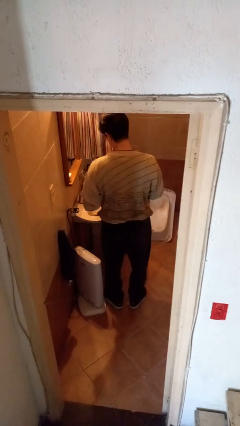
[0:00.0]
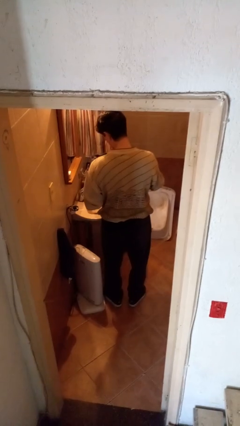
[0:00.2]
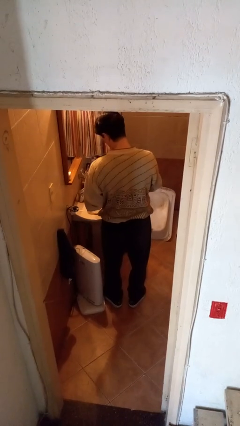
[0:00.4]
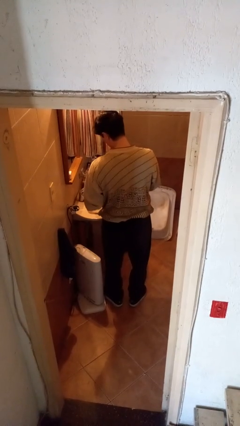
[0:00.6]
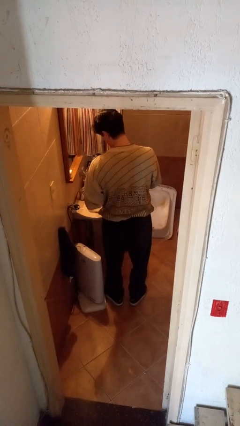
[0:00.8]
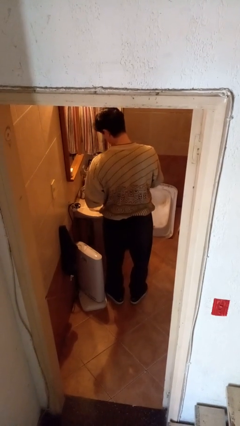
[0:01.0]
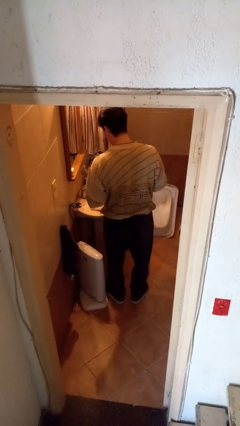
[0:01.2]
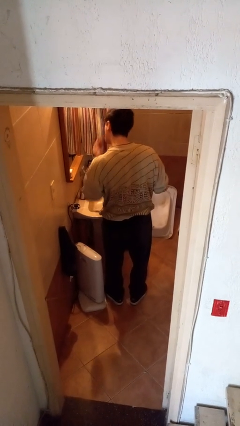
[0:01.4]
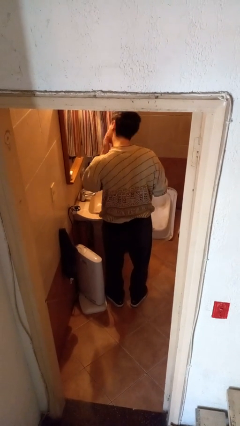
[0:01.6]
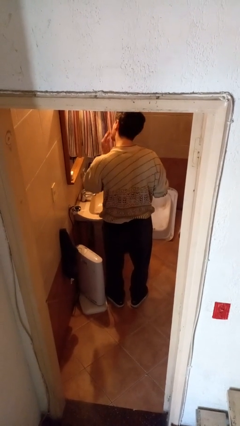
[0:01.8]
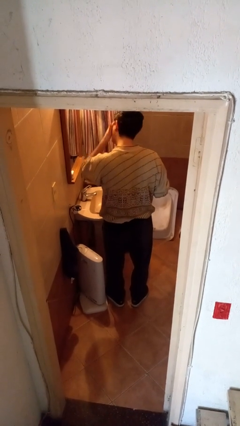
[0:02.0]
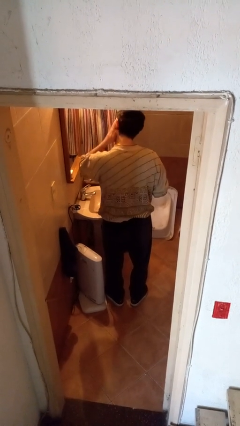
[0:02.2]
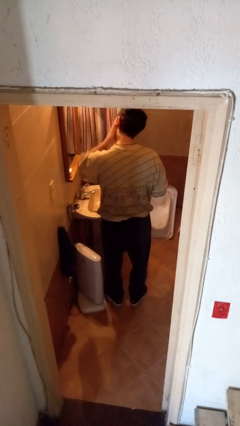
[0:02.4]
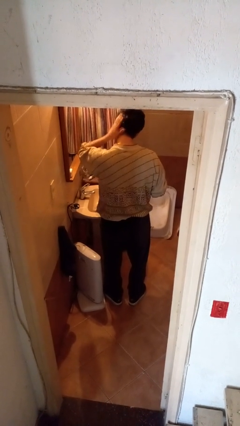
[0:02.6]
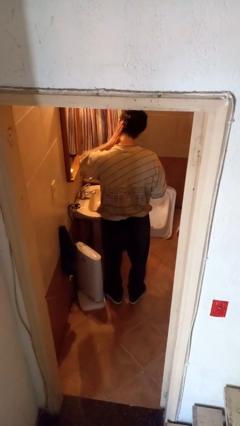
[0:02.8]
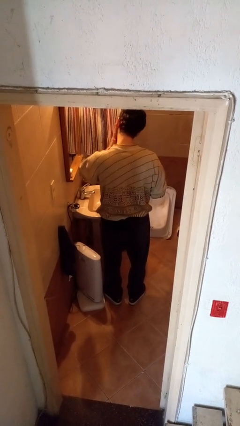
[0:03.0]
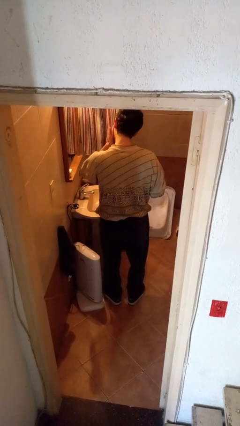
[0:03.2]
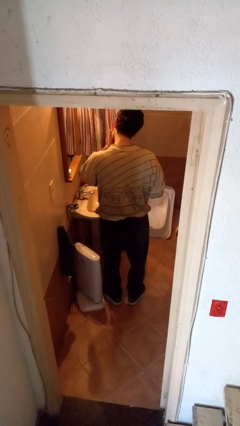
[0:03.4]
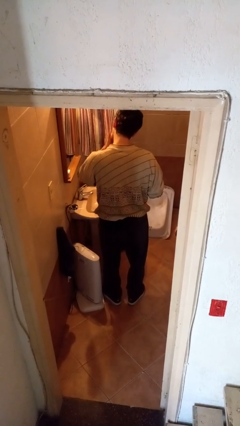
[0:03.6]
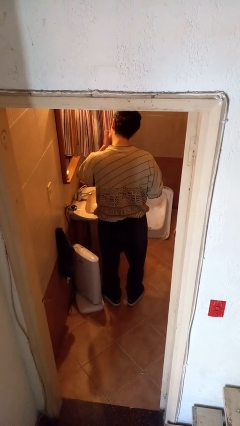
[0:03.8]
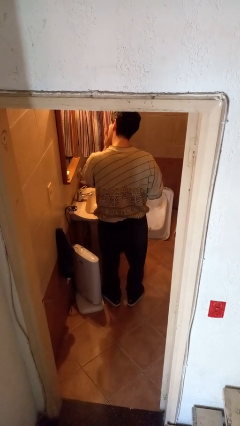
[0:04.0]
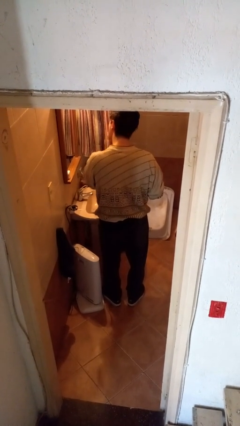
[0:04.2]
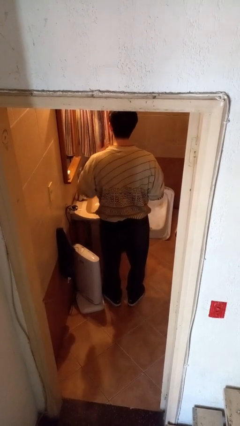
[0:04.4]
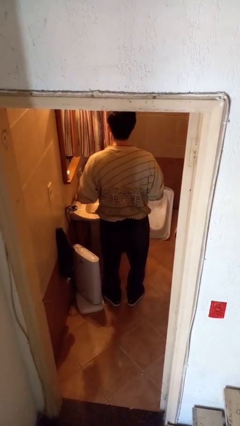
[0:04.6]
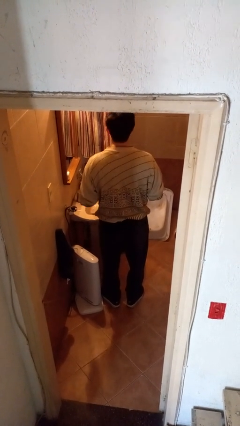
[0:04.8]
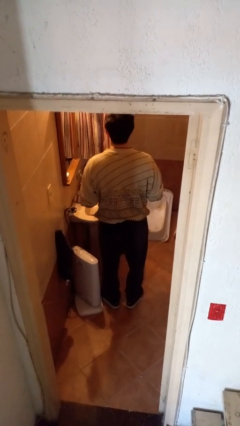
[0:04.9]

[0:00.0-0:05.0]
person applies facial moisturizer

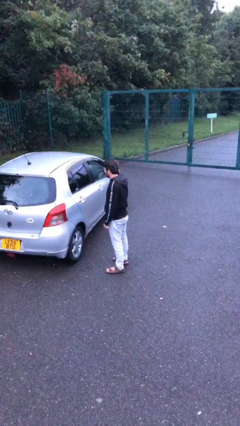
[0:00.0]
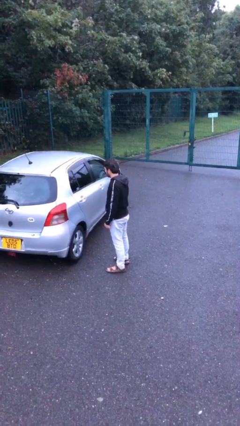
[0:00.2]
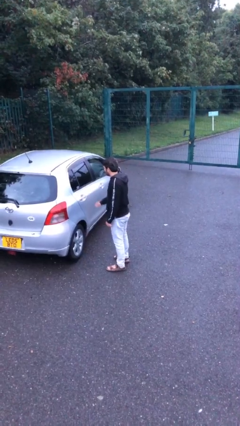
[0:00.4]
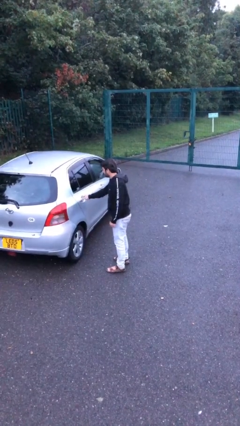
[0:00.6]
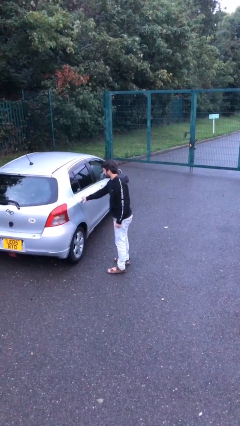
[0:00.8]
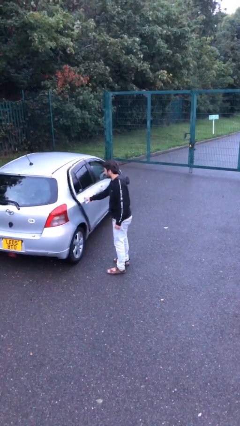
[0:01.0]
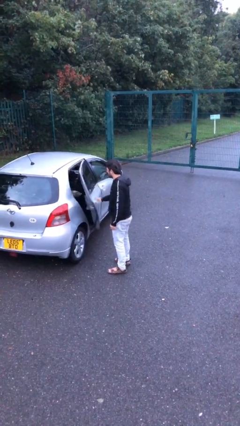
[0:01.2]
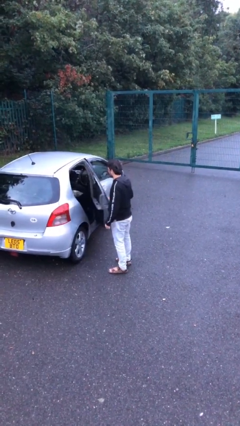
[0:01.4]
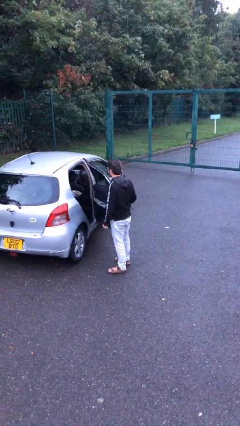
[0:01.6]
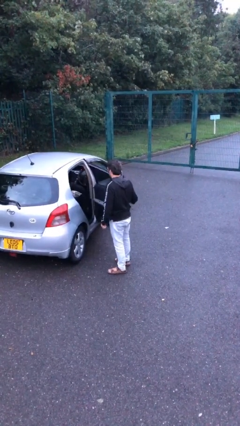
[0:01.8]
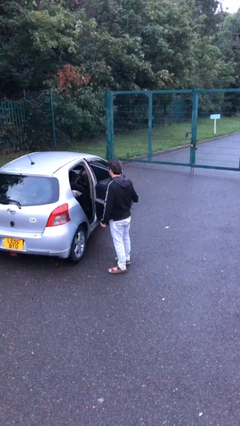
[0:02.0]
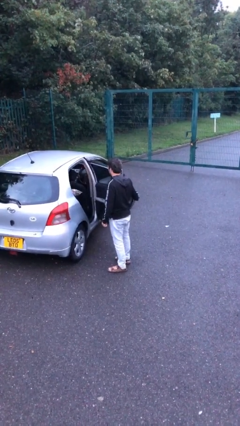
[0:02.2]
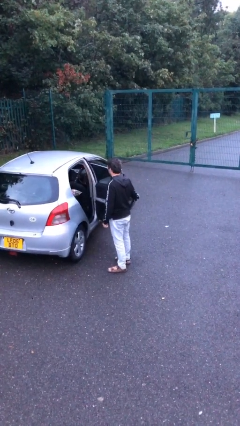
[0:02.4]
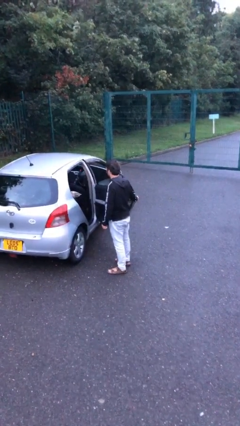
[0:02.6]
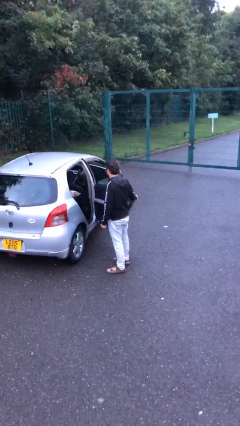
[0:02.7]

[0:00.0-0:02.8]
person opens car door

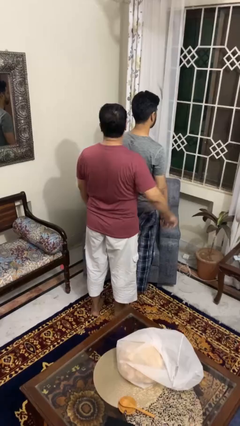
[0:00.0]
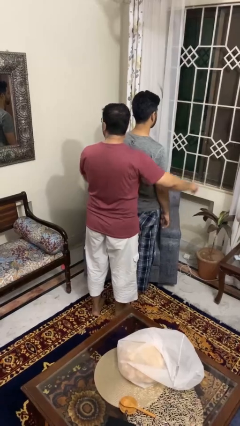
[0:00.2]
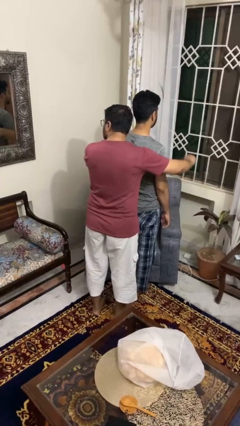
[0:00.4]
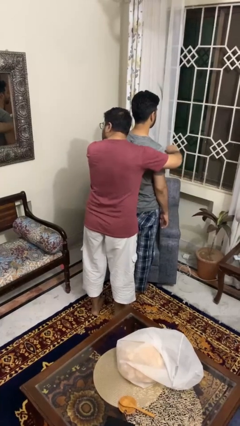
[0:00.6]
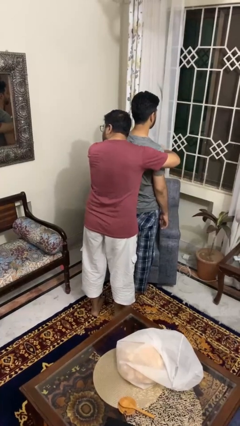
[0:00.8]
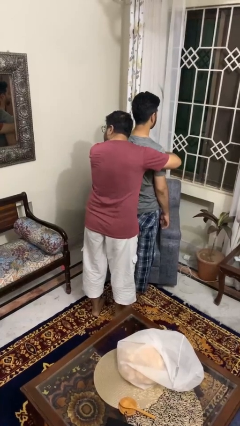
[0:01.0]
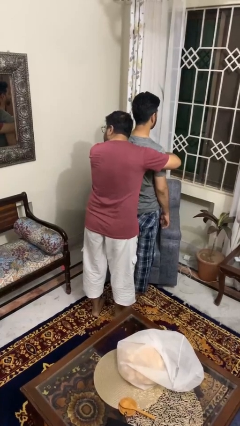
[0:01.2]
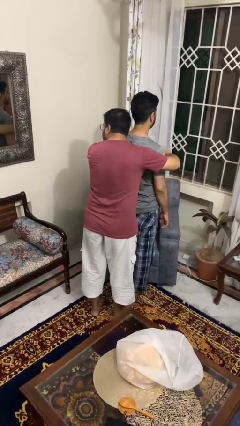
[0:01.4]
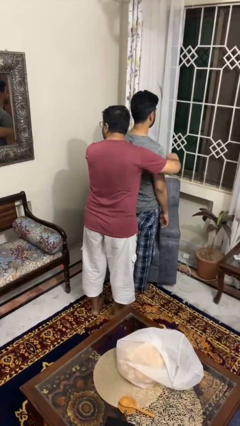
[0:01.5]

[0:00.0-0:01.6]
person hugs person from behind

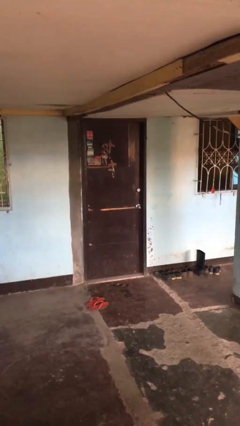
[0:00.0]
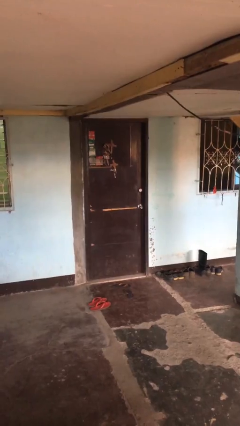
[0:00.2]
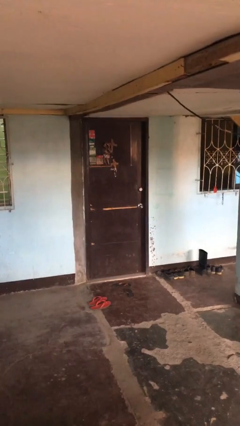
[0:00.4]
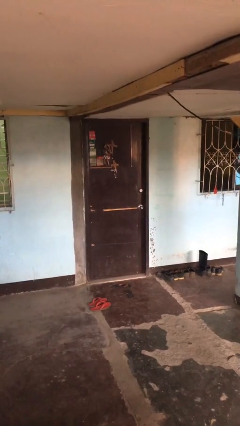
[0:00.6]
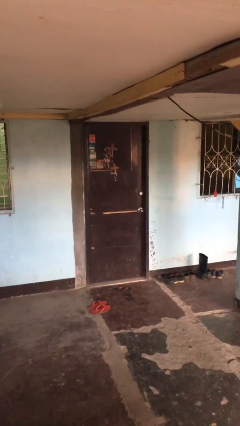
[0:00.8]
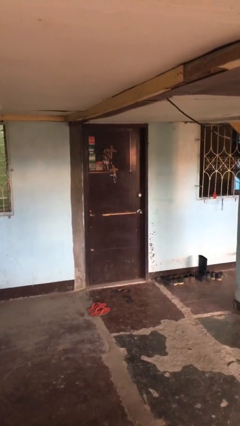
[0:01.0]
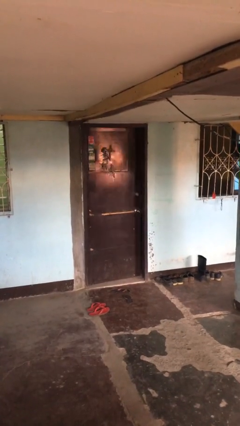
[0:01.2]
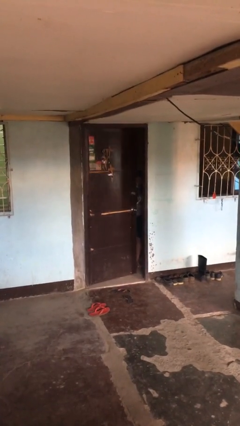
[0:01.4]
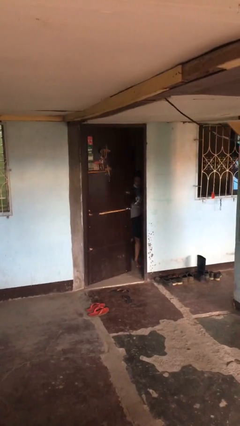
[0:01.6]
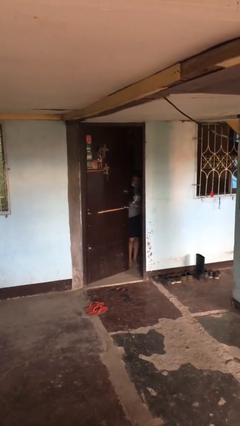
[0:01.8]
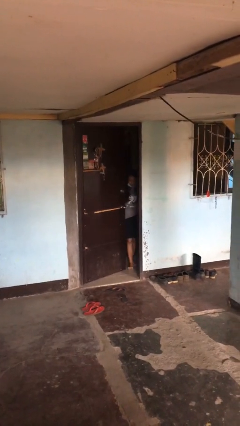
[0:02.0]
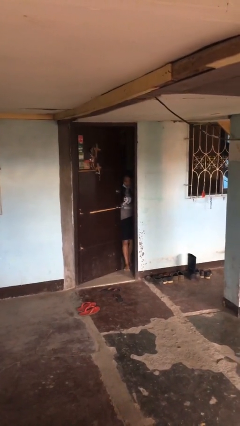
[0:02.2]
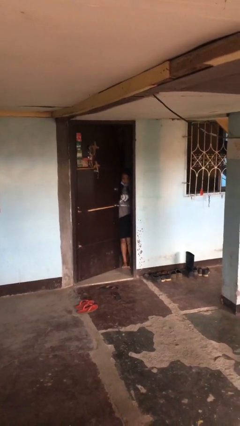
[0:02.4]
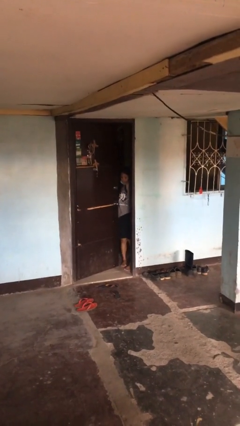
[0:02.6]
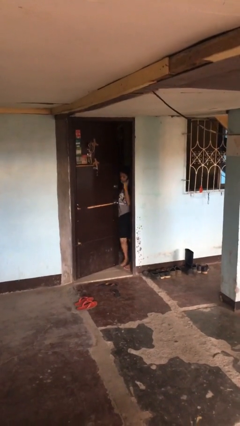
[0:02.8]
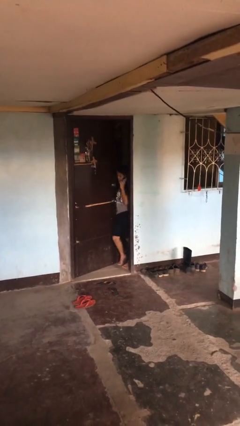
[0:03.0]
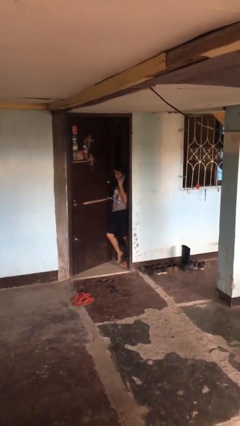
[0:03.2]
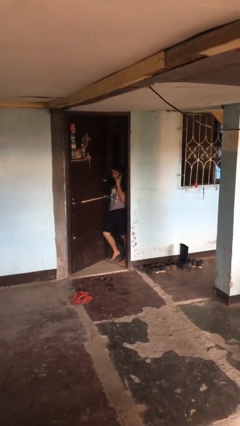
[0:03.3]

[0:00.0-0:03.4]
person opens facility door

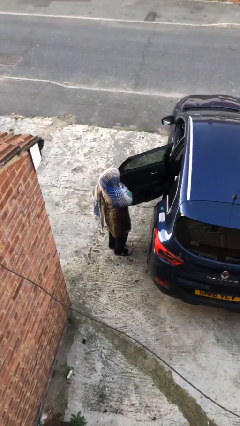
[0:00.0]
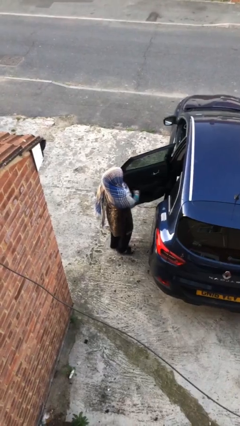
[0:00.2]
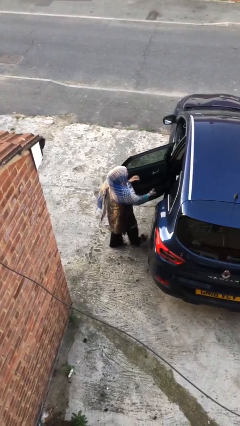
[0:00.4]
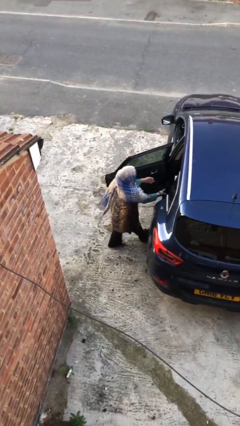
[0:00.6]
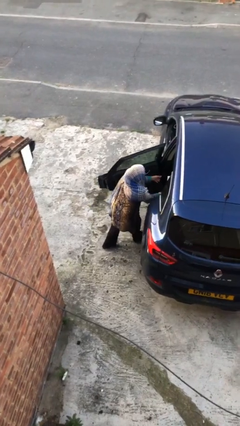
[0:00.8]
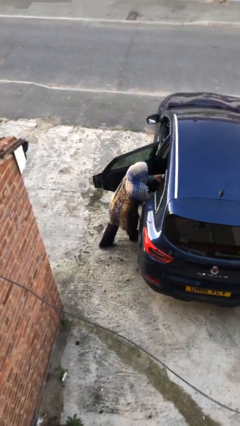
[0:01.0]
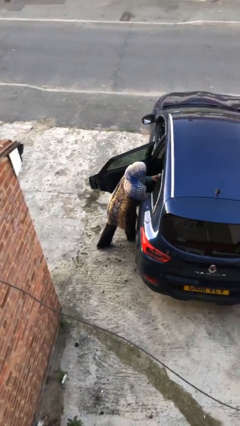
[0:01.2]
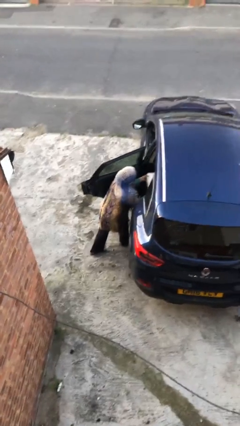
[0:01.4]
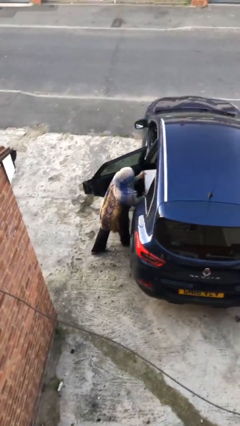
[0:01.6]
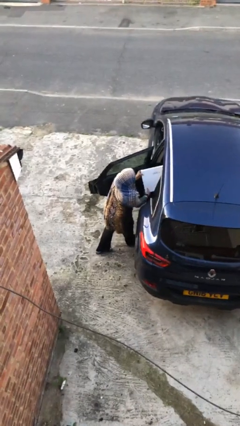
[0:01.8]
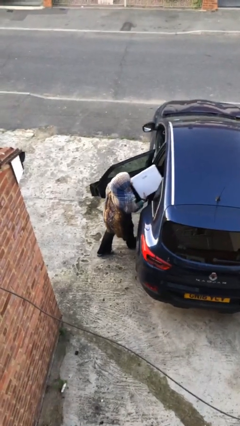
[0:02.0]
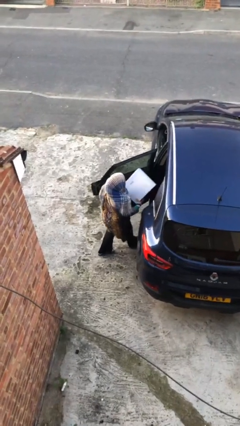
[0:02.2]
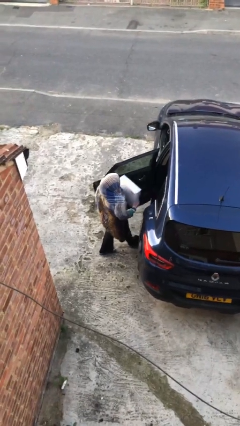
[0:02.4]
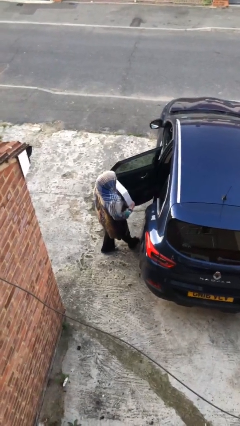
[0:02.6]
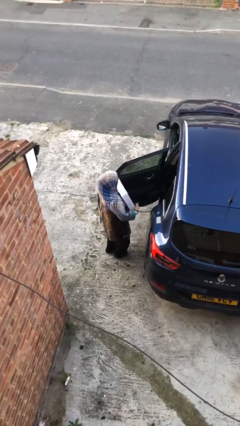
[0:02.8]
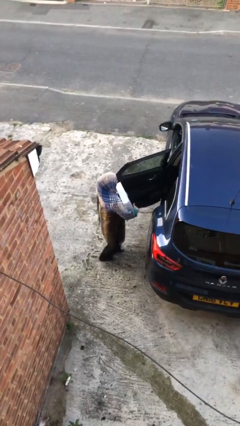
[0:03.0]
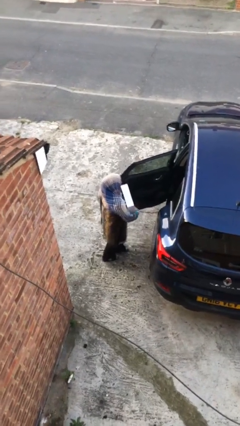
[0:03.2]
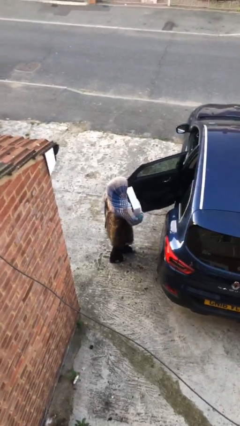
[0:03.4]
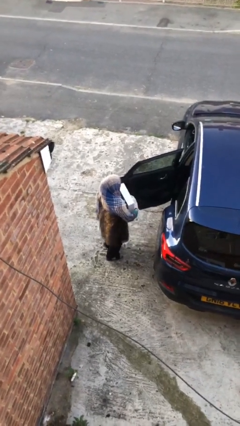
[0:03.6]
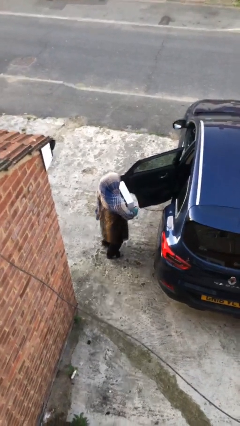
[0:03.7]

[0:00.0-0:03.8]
person unloads car
